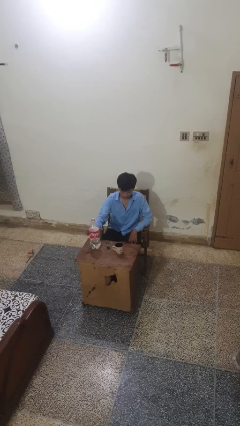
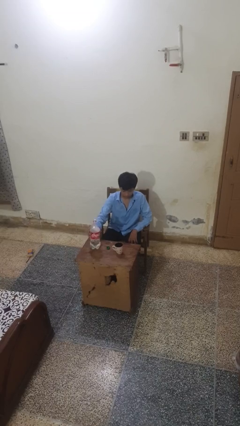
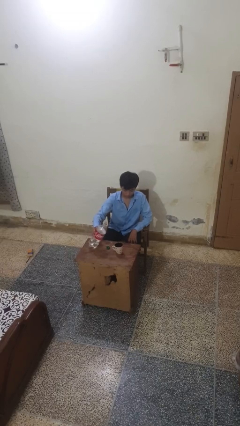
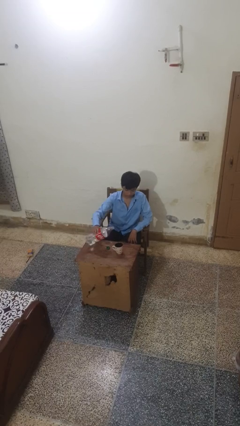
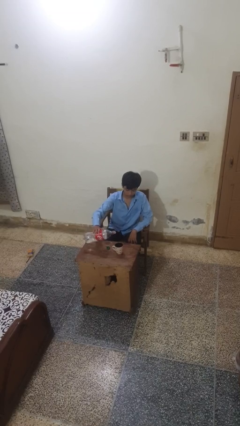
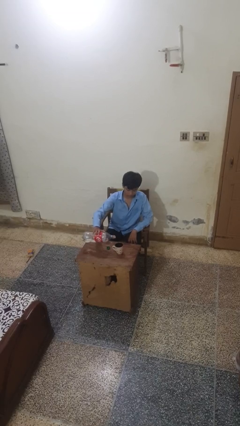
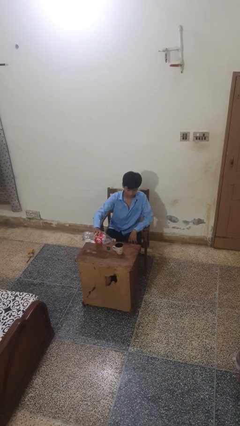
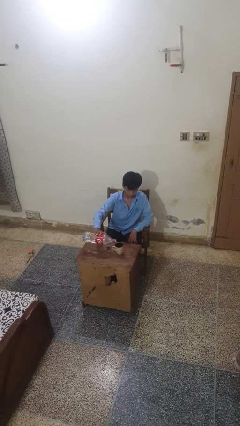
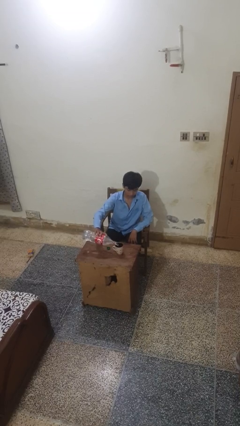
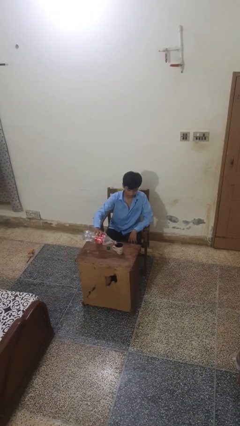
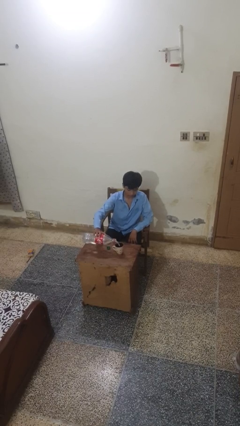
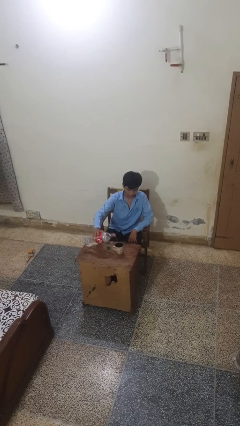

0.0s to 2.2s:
person pours liquid into cup

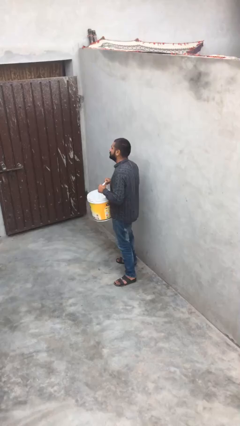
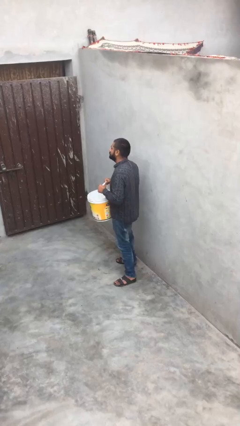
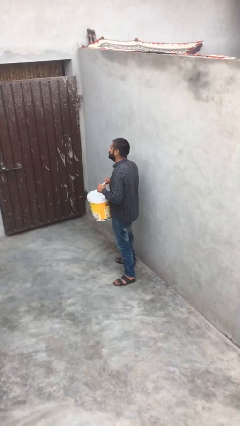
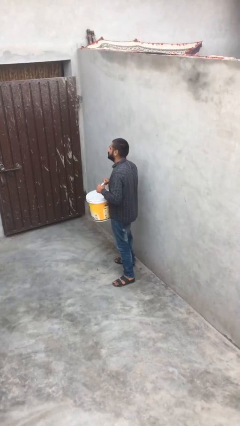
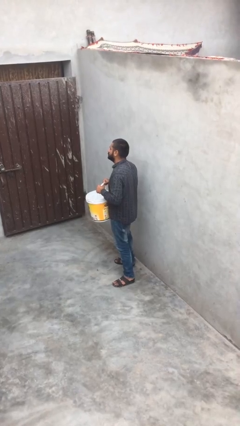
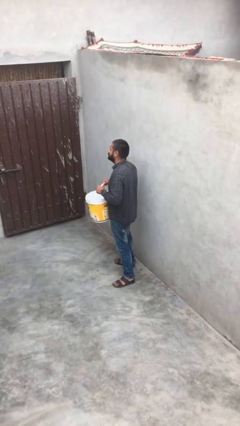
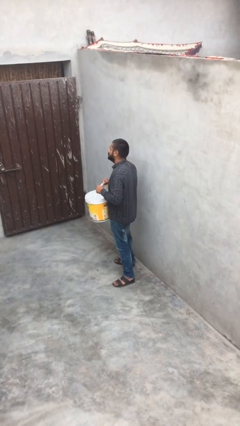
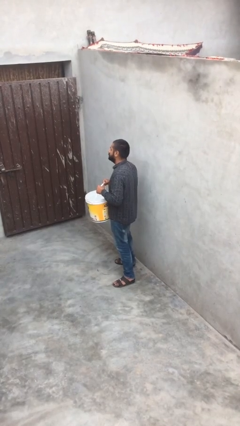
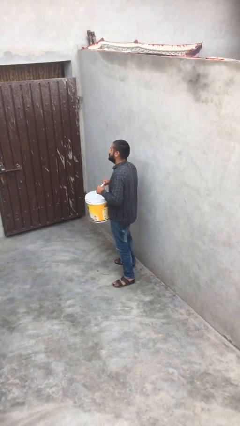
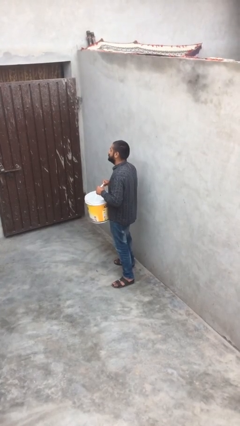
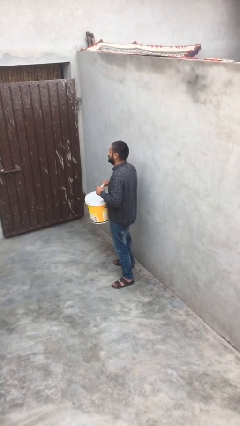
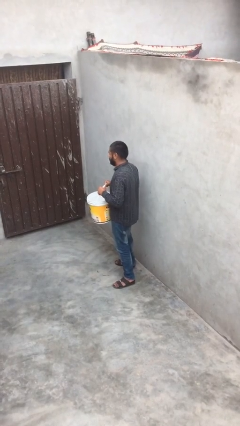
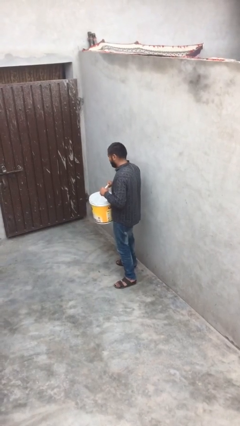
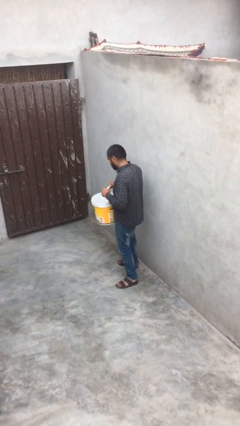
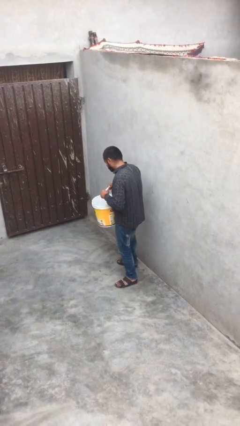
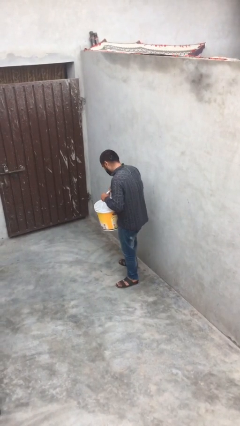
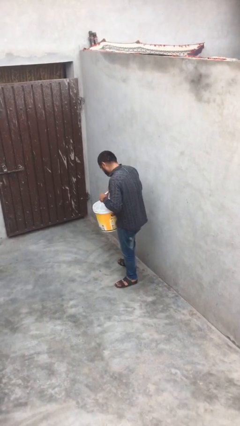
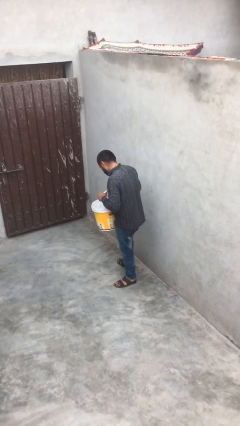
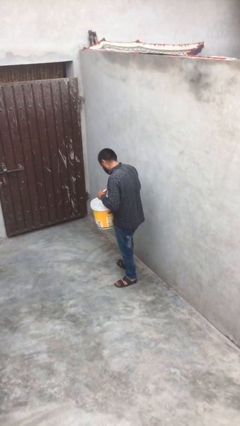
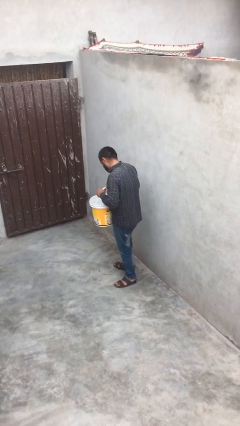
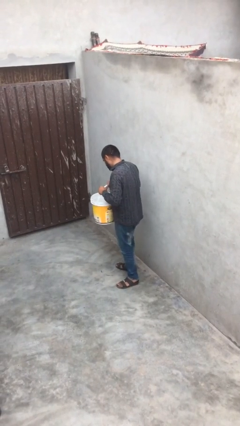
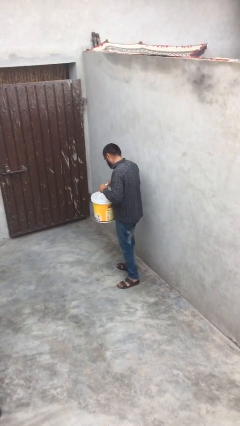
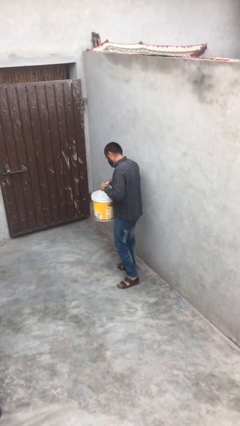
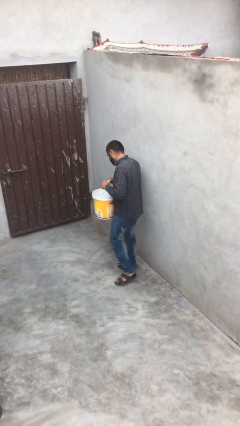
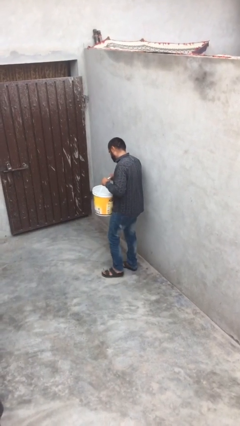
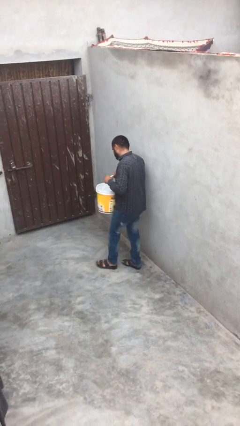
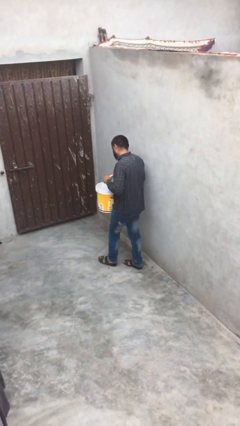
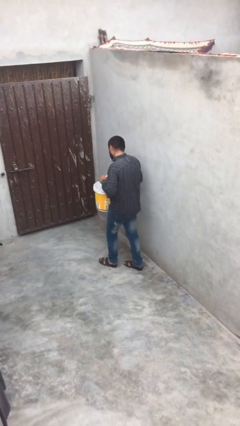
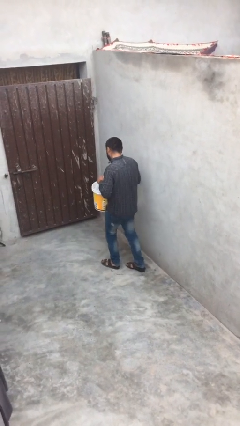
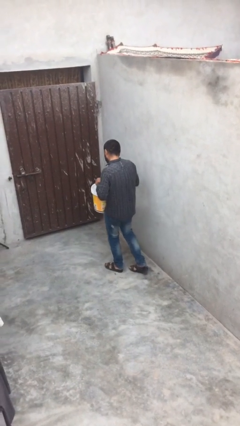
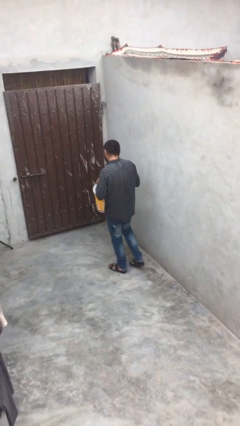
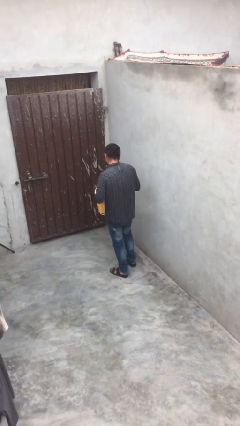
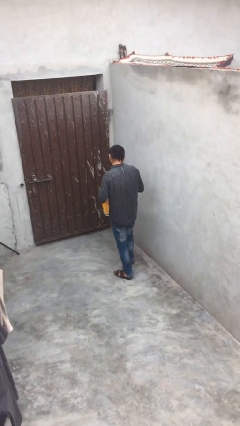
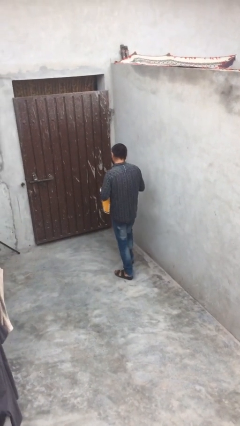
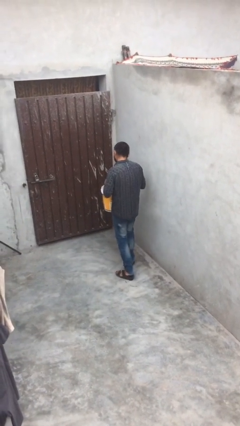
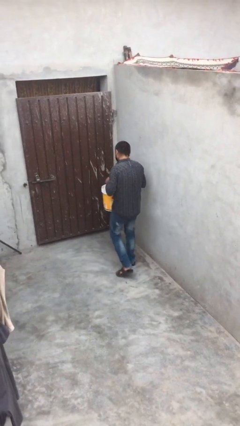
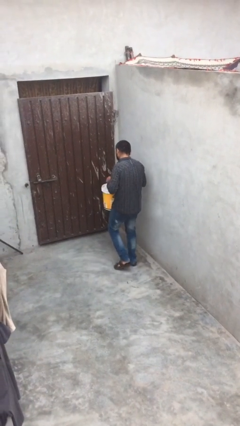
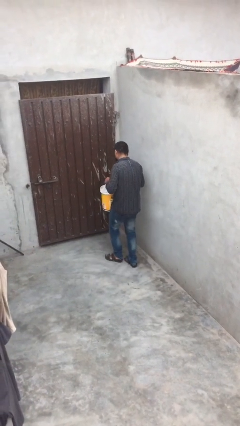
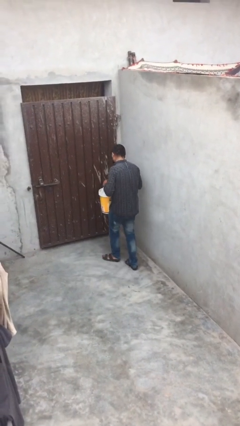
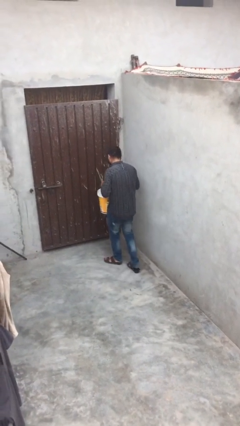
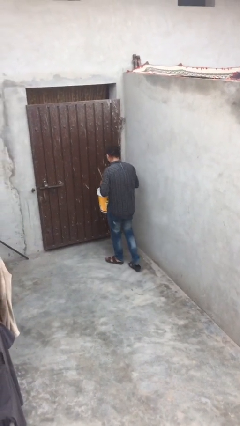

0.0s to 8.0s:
person carries heavy object

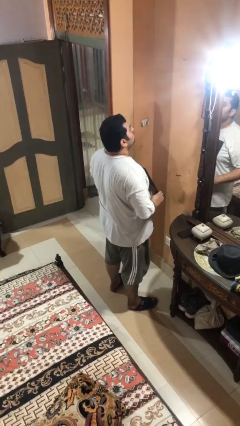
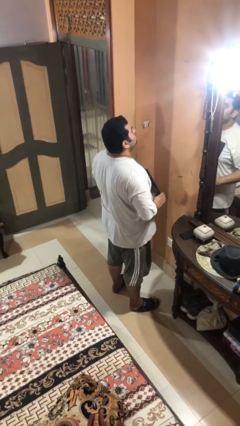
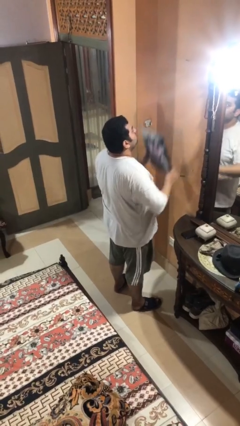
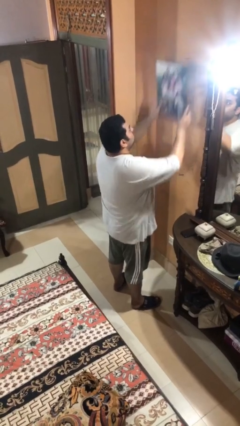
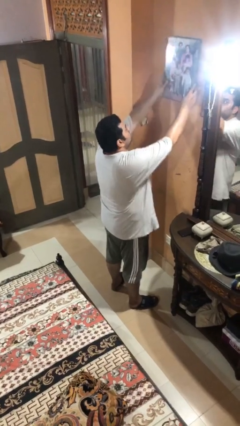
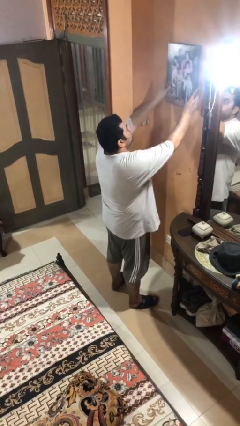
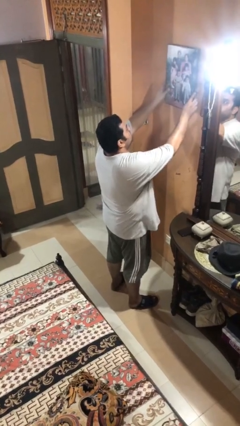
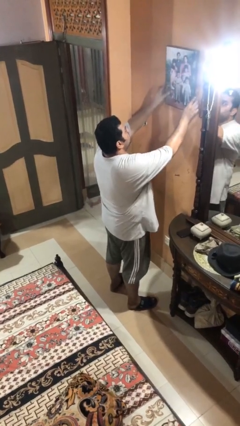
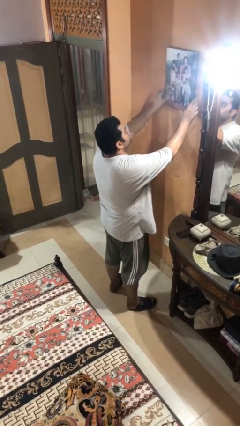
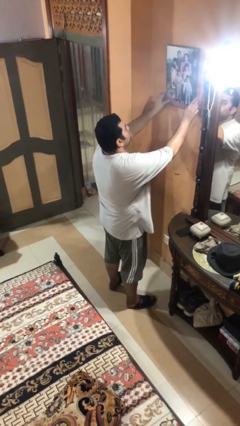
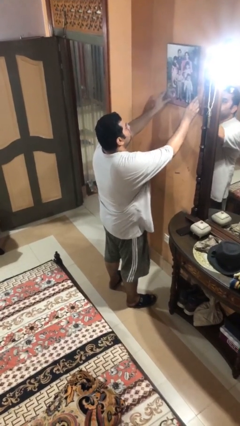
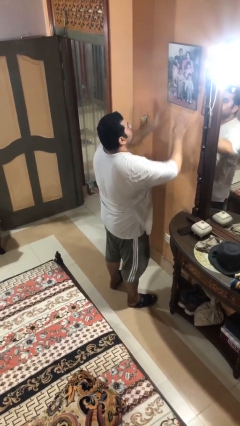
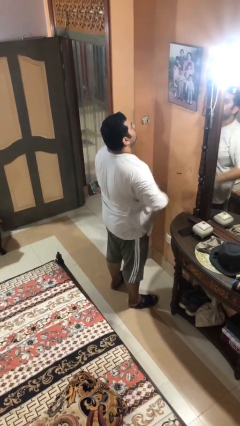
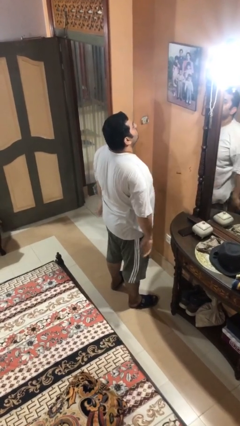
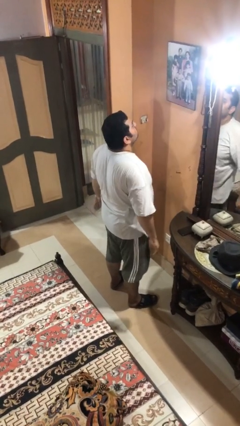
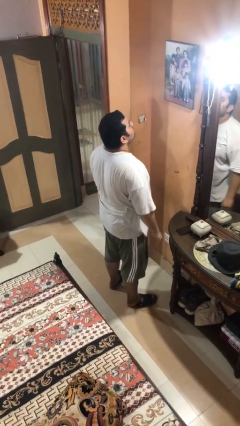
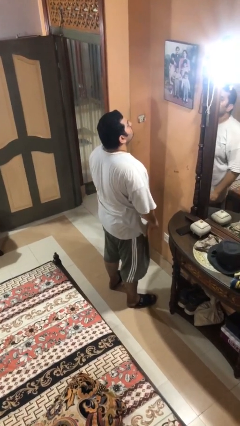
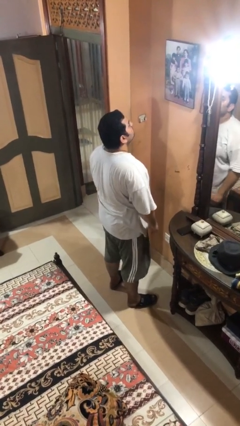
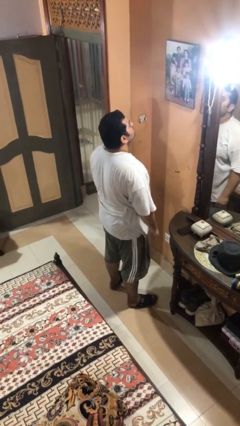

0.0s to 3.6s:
person puts up picture frame

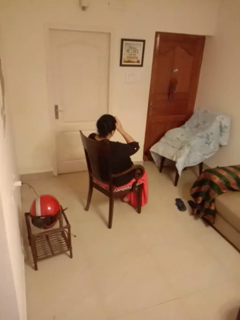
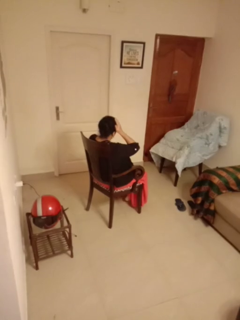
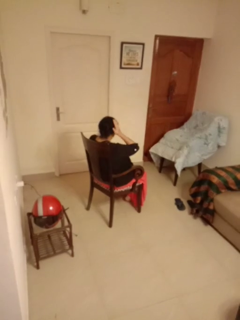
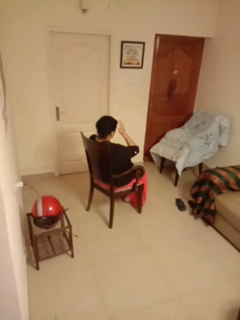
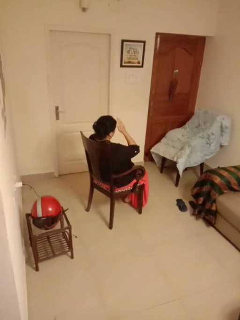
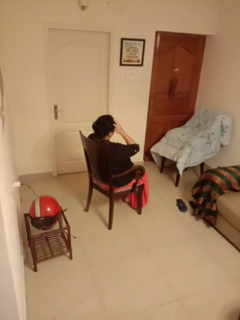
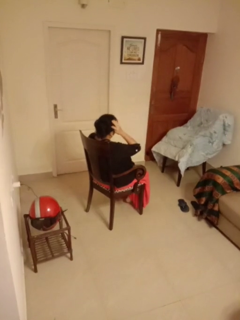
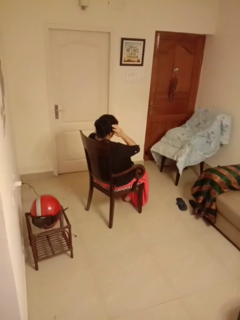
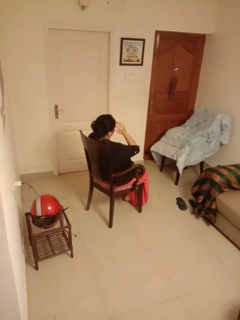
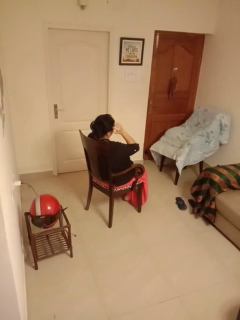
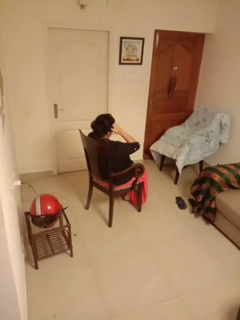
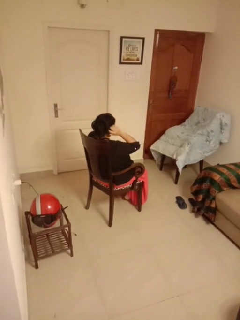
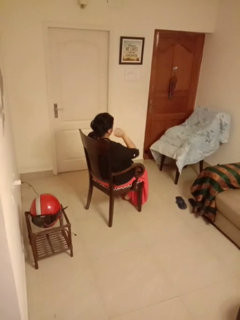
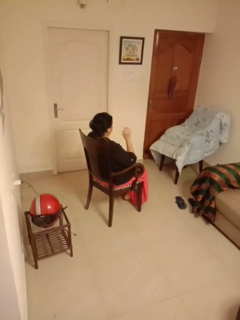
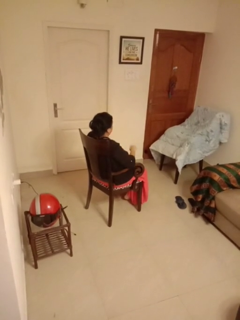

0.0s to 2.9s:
person strokes hair

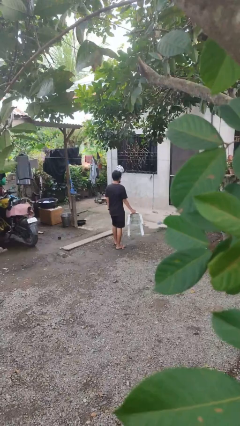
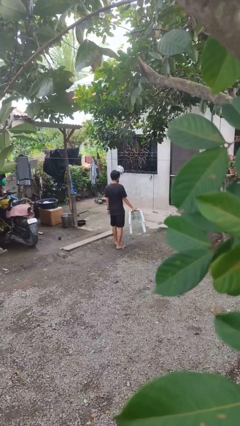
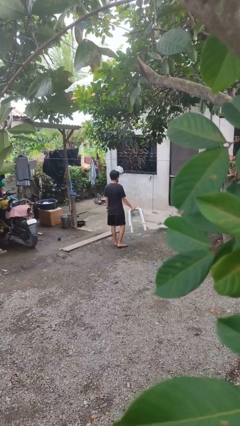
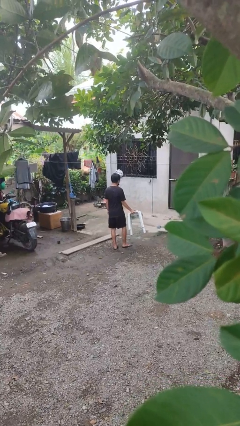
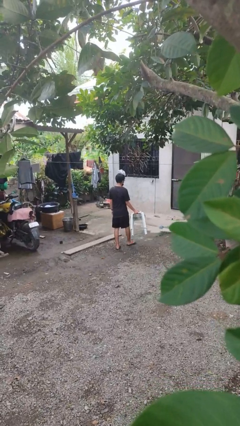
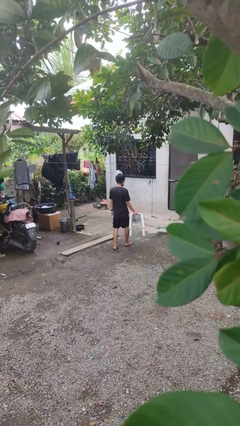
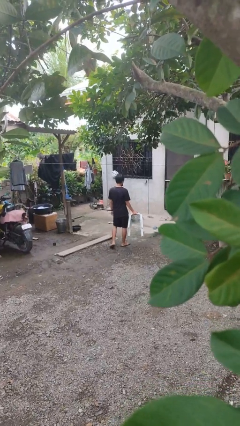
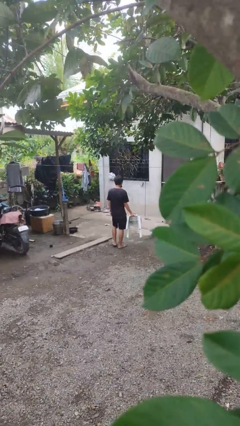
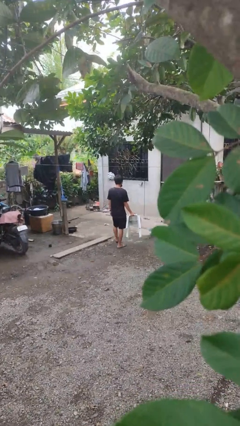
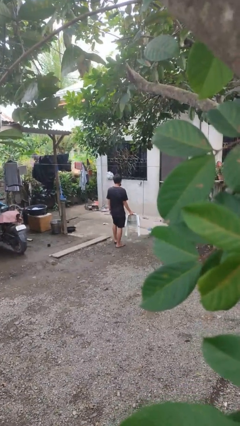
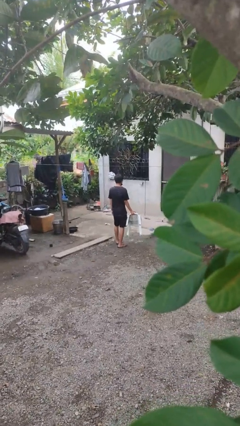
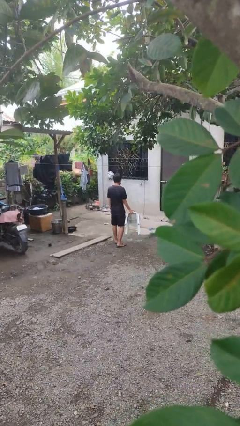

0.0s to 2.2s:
person carries furniture
